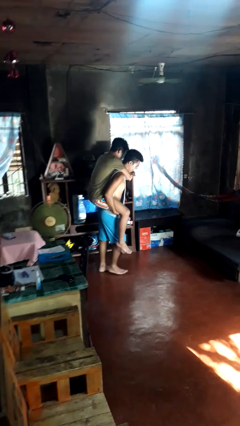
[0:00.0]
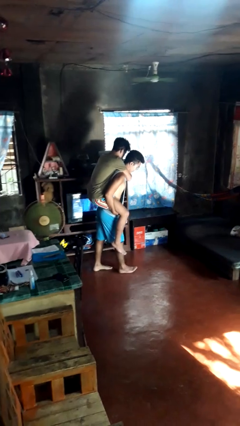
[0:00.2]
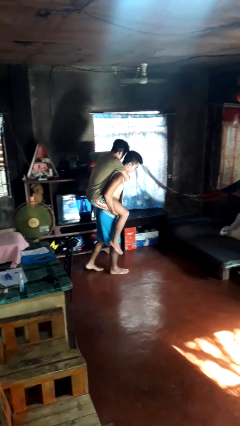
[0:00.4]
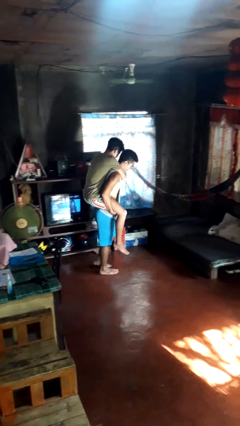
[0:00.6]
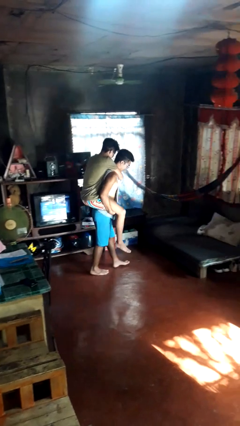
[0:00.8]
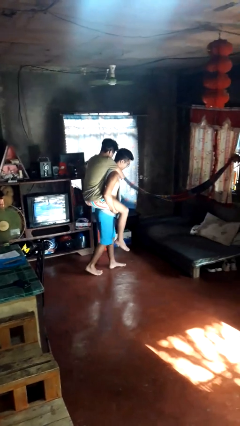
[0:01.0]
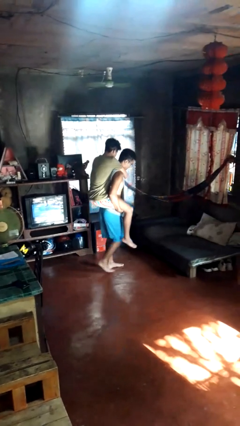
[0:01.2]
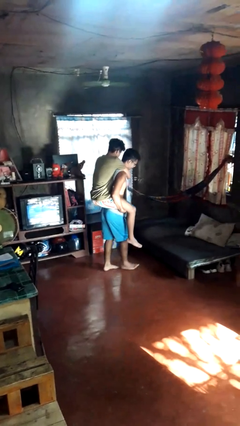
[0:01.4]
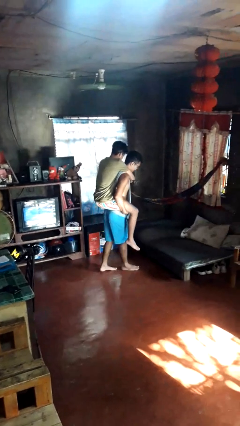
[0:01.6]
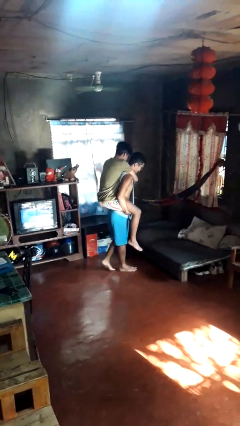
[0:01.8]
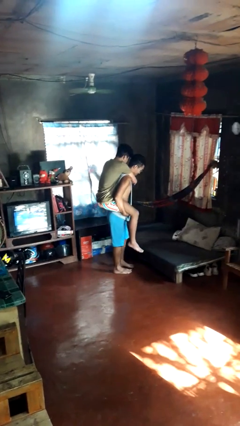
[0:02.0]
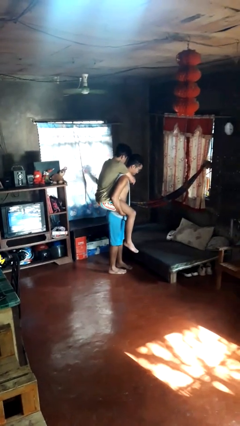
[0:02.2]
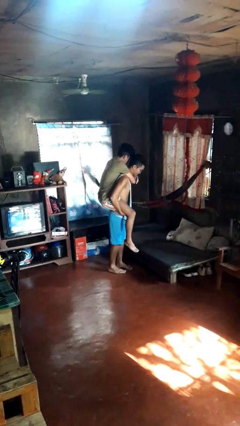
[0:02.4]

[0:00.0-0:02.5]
person carries person on back

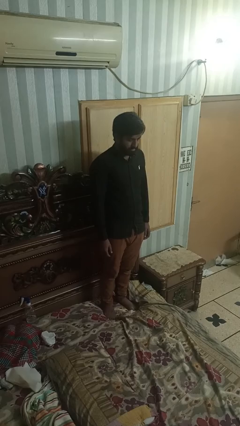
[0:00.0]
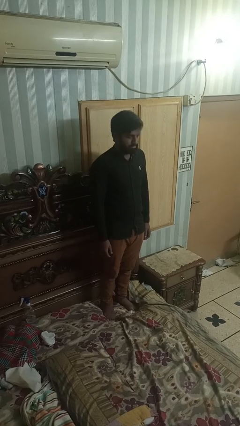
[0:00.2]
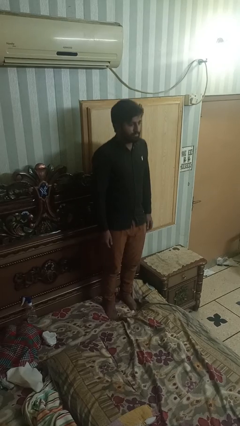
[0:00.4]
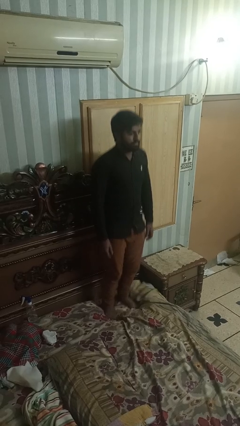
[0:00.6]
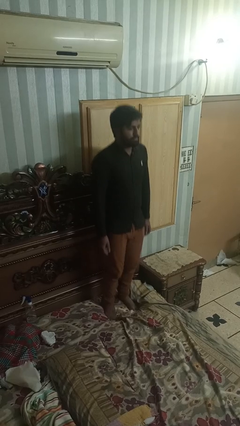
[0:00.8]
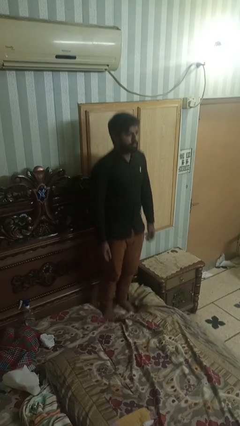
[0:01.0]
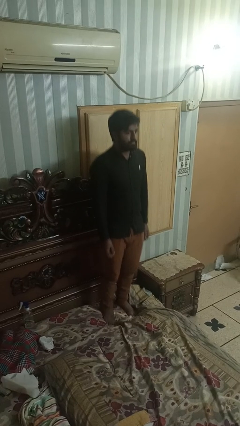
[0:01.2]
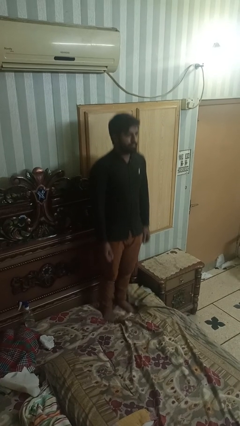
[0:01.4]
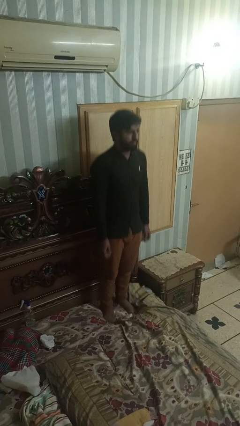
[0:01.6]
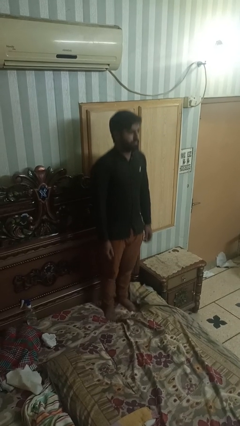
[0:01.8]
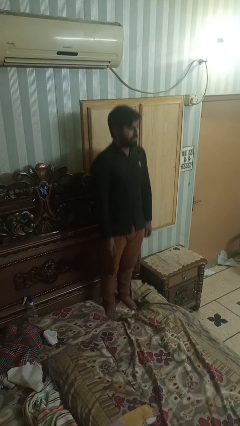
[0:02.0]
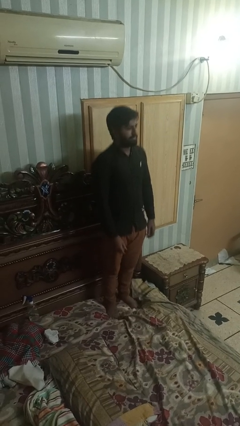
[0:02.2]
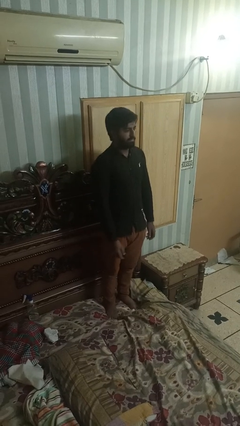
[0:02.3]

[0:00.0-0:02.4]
person jumps on bed

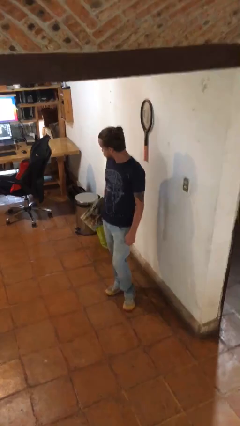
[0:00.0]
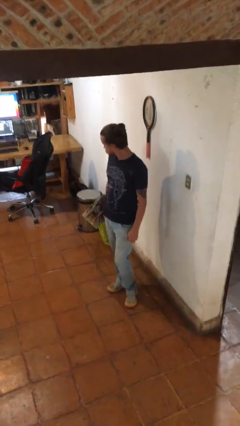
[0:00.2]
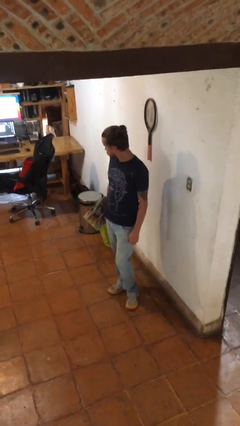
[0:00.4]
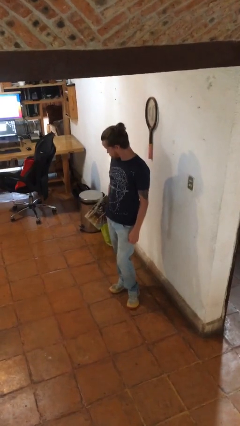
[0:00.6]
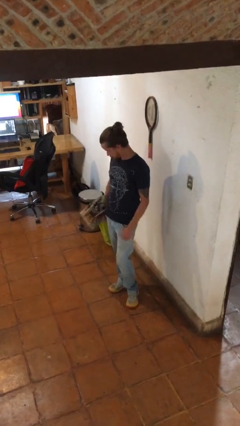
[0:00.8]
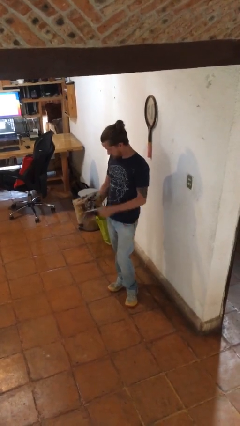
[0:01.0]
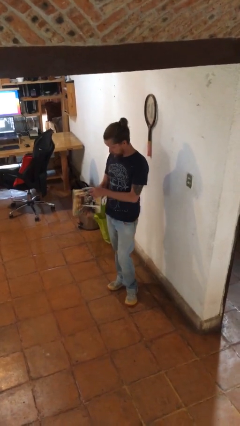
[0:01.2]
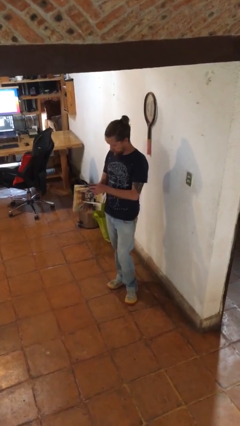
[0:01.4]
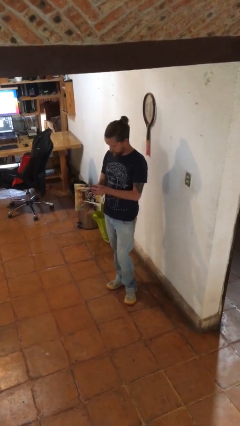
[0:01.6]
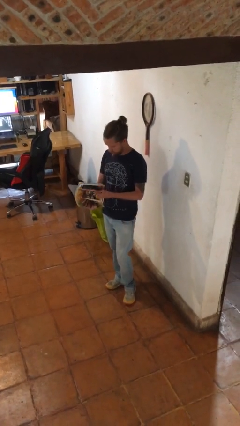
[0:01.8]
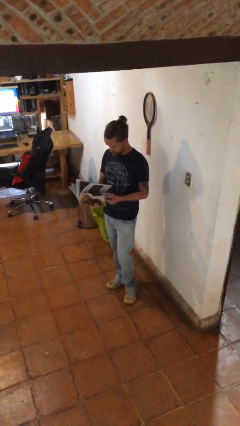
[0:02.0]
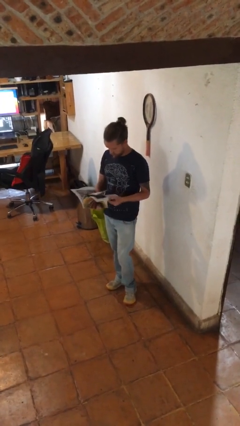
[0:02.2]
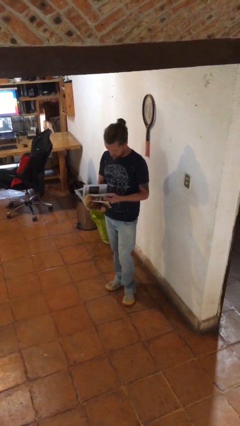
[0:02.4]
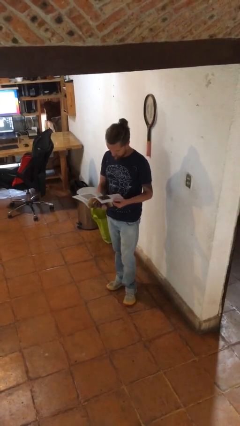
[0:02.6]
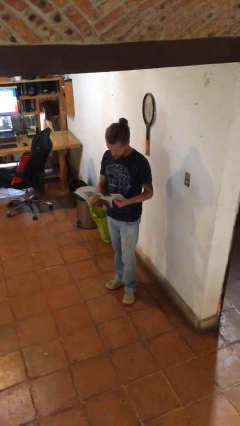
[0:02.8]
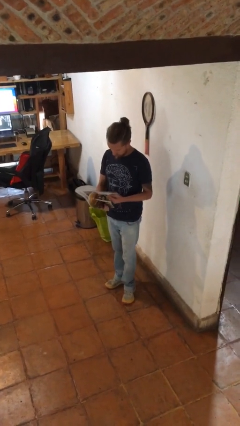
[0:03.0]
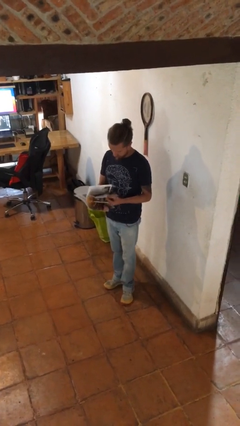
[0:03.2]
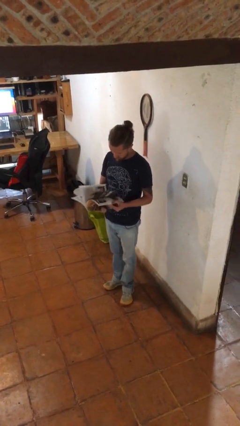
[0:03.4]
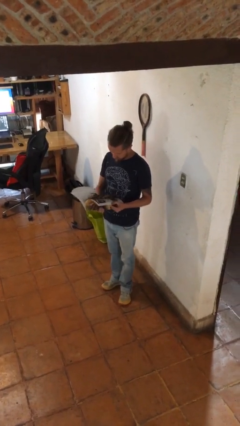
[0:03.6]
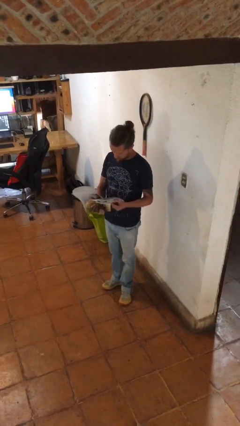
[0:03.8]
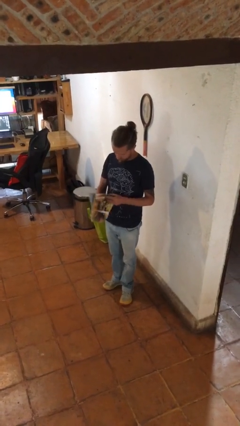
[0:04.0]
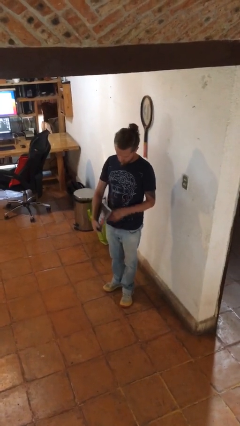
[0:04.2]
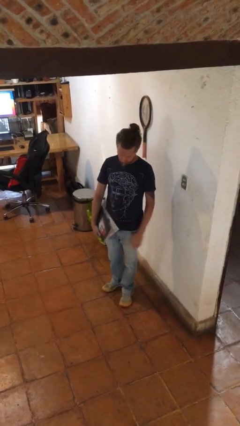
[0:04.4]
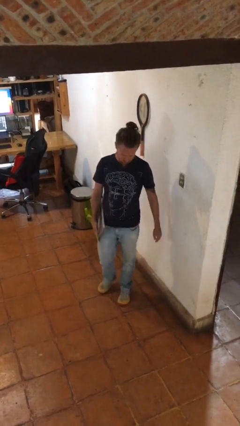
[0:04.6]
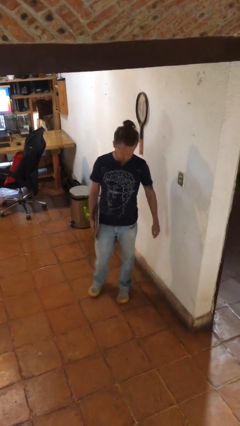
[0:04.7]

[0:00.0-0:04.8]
person reads magazine

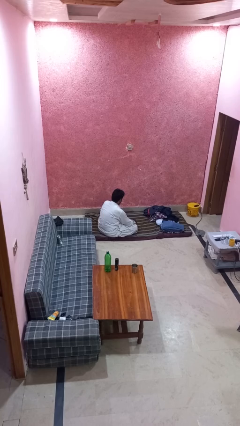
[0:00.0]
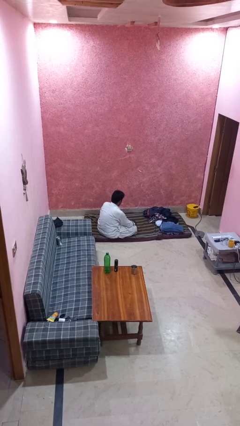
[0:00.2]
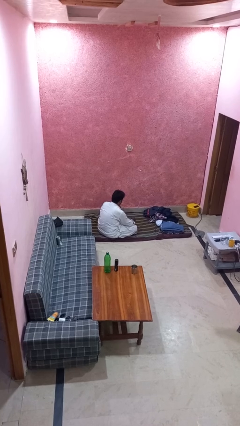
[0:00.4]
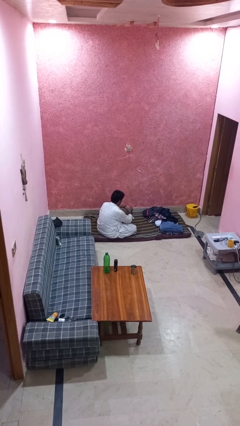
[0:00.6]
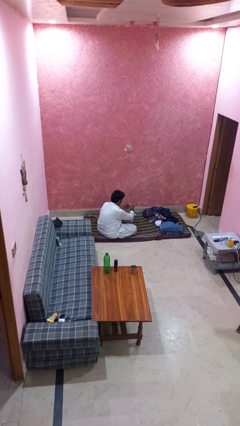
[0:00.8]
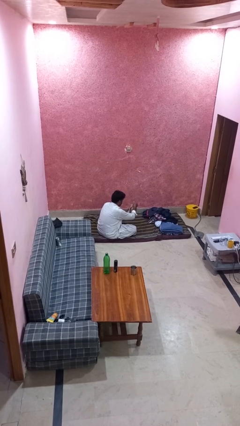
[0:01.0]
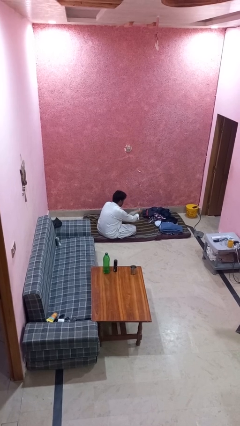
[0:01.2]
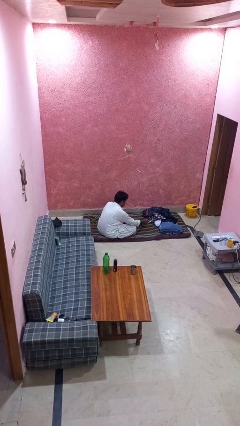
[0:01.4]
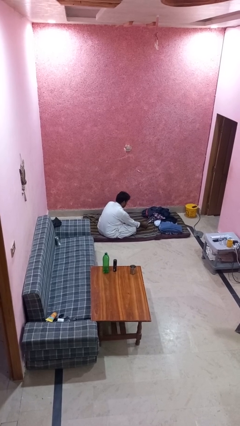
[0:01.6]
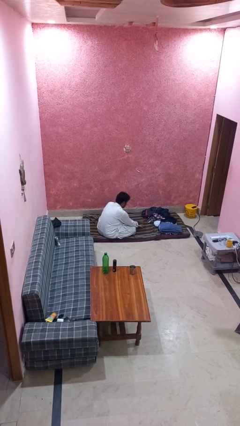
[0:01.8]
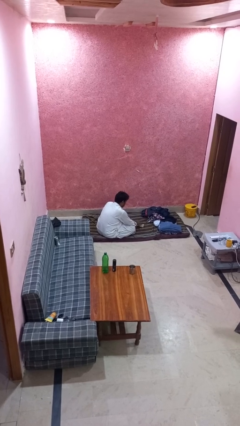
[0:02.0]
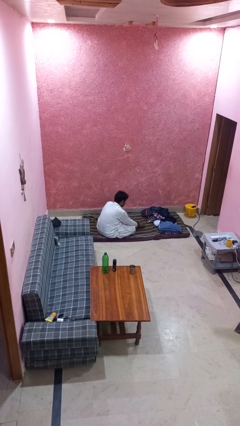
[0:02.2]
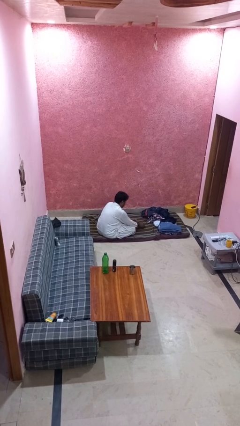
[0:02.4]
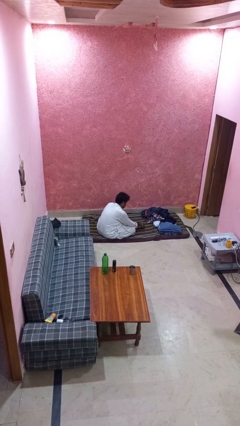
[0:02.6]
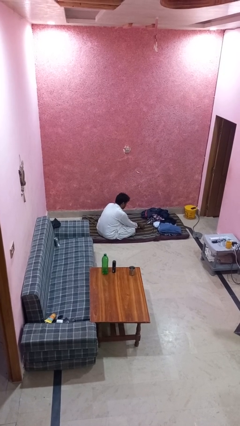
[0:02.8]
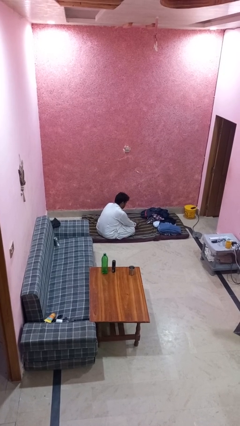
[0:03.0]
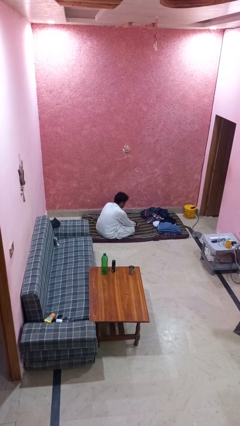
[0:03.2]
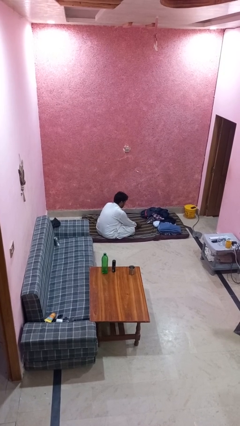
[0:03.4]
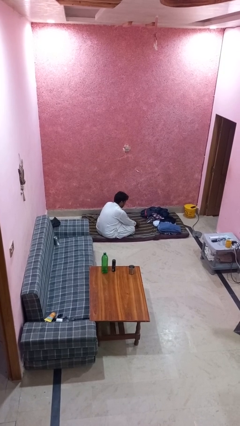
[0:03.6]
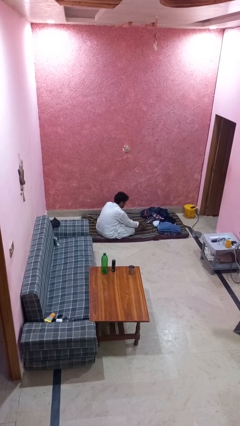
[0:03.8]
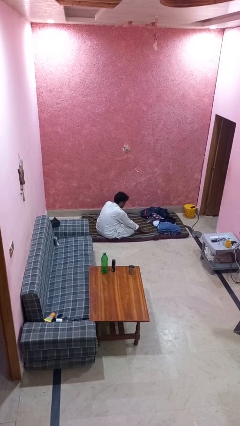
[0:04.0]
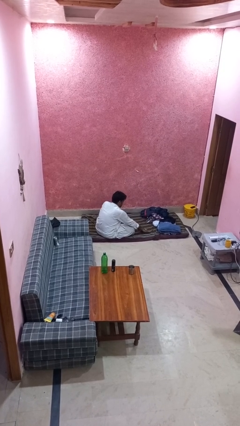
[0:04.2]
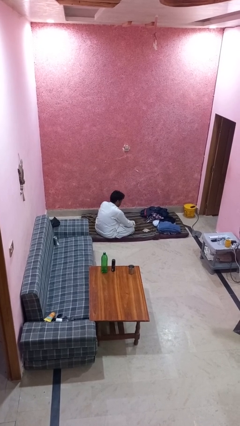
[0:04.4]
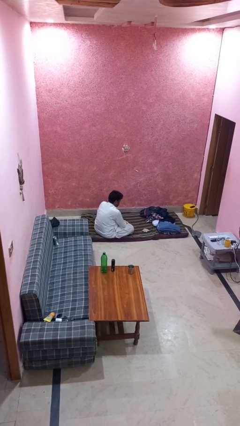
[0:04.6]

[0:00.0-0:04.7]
person folds socks

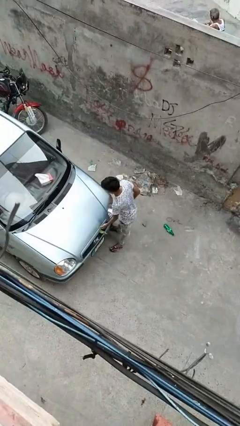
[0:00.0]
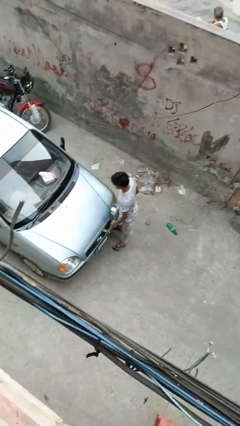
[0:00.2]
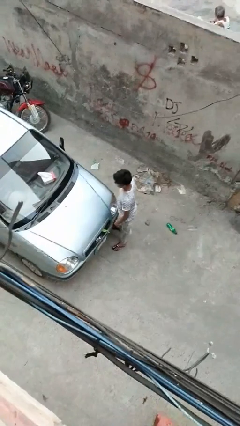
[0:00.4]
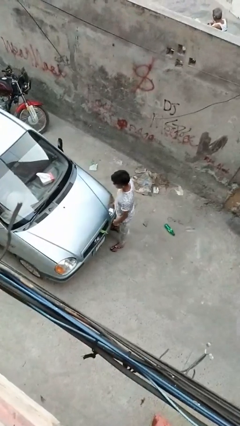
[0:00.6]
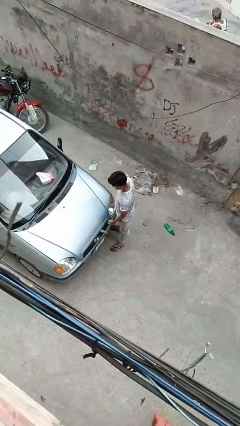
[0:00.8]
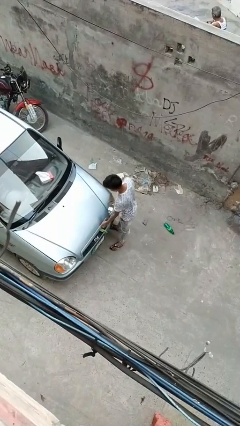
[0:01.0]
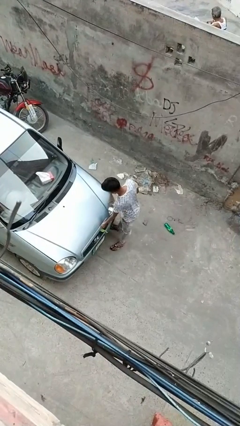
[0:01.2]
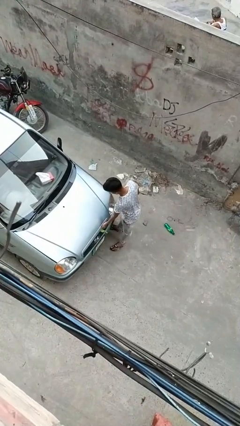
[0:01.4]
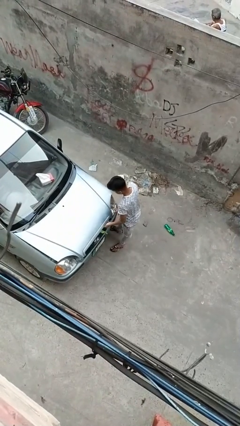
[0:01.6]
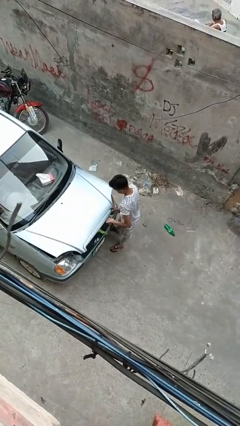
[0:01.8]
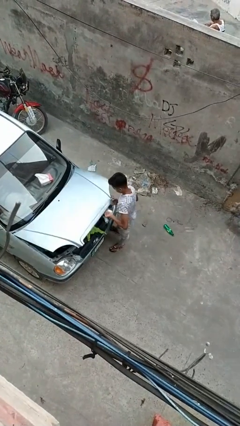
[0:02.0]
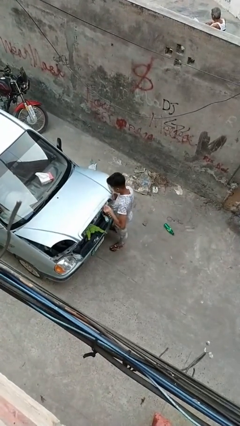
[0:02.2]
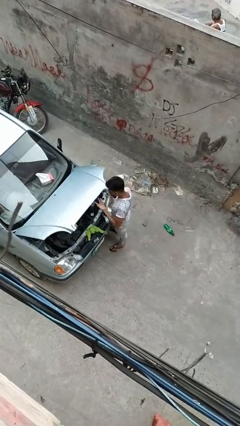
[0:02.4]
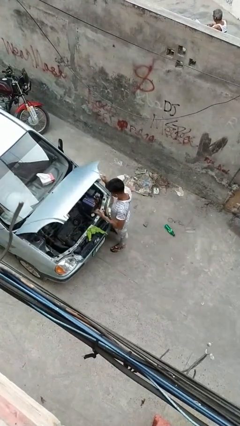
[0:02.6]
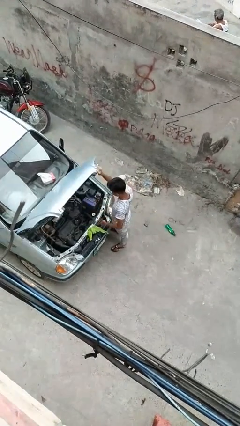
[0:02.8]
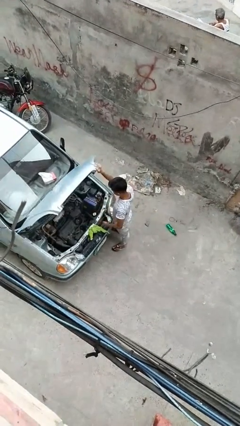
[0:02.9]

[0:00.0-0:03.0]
person opens car hood
